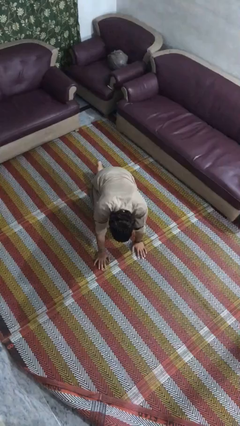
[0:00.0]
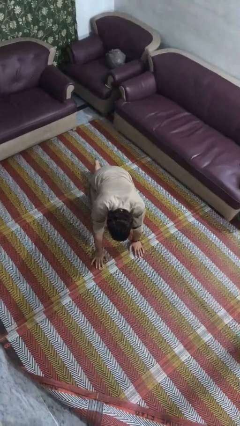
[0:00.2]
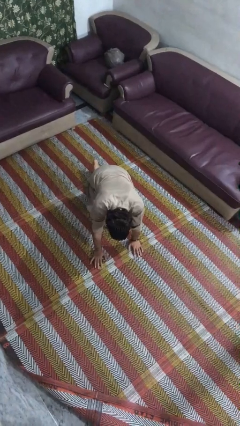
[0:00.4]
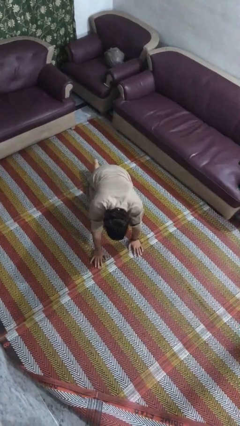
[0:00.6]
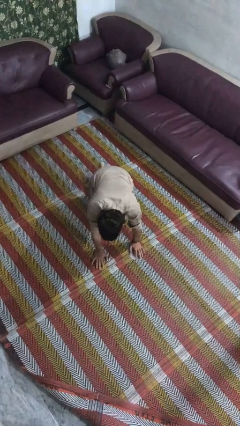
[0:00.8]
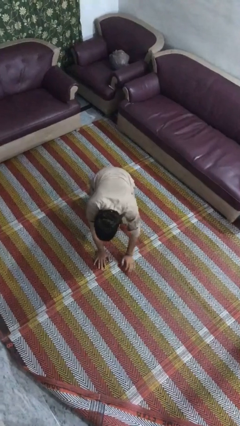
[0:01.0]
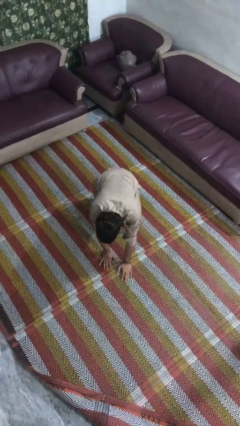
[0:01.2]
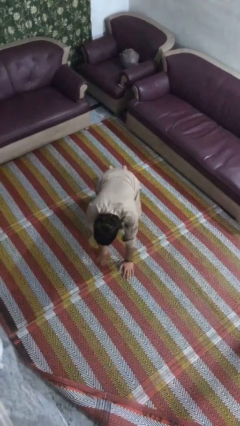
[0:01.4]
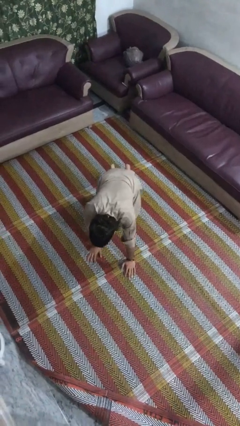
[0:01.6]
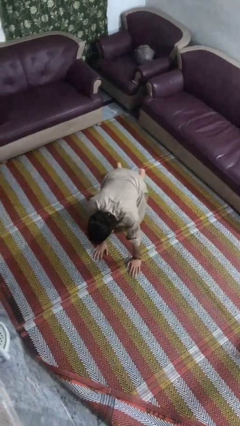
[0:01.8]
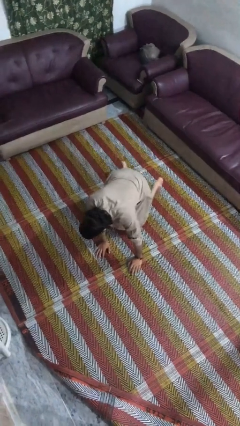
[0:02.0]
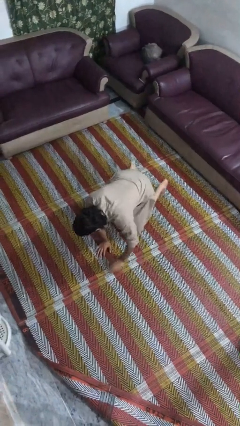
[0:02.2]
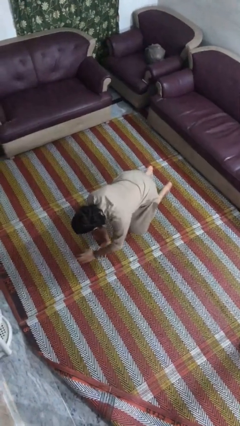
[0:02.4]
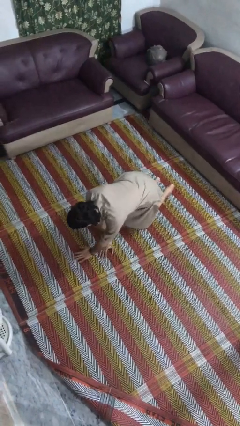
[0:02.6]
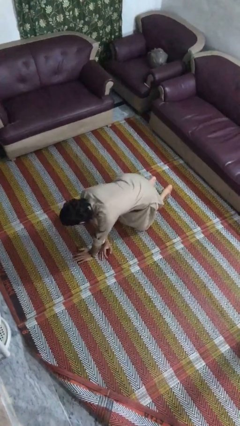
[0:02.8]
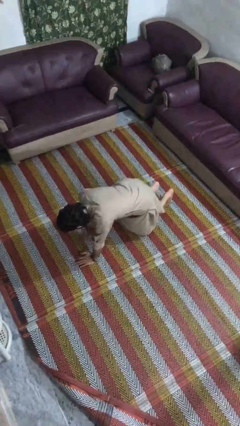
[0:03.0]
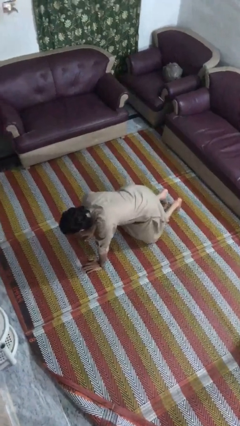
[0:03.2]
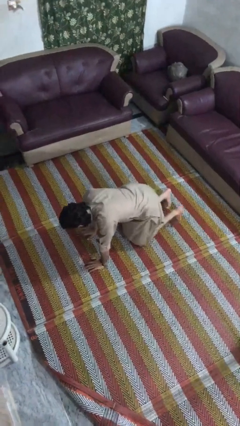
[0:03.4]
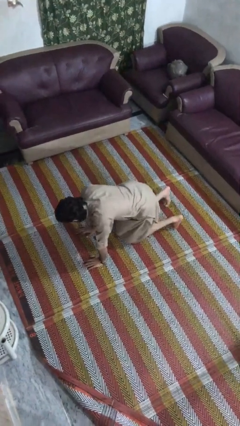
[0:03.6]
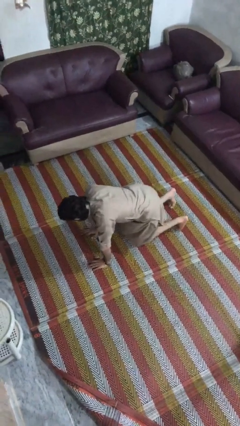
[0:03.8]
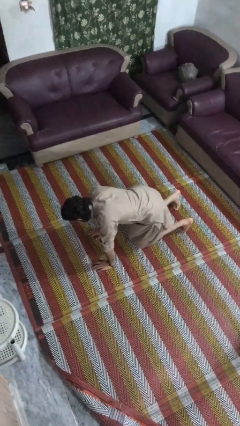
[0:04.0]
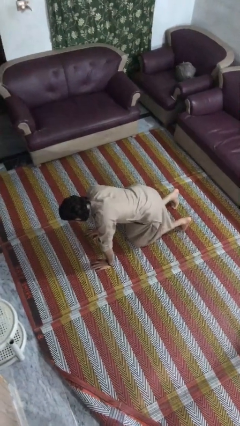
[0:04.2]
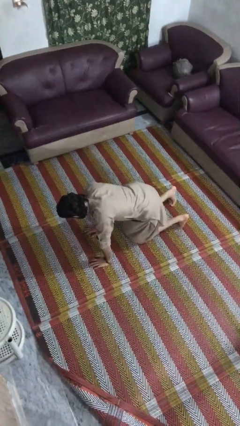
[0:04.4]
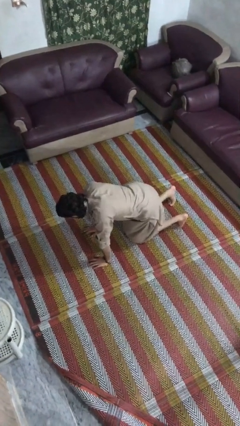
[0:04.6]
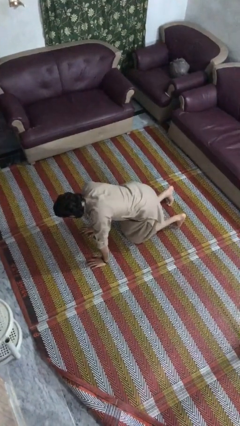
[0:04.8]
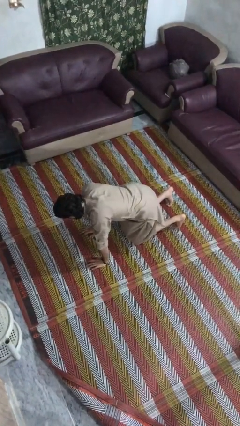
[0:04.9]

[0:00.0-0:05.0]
person crawls

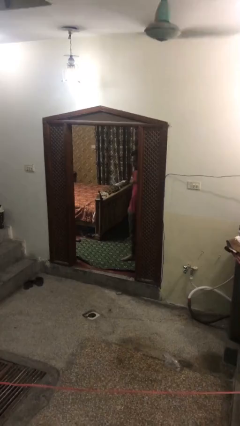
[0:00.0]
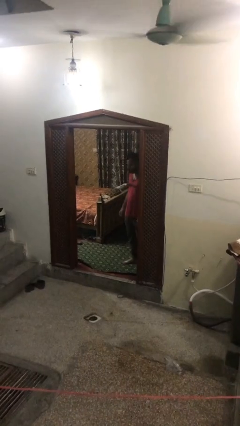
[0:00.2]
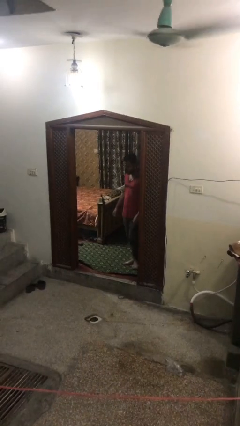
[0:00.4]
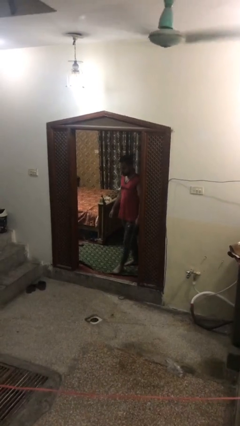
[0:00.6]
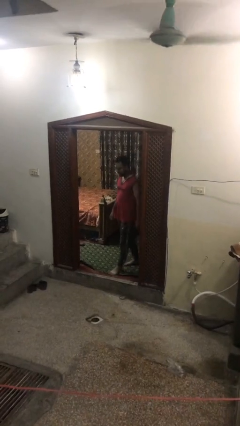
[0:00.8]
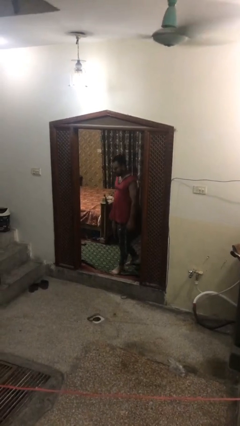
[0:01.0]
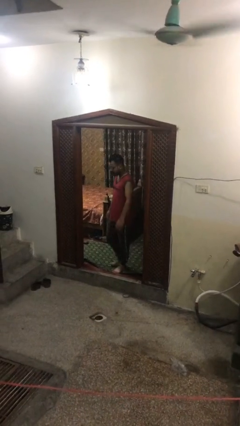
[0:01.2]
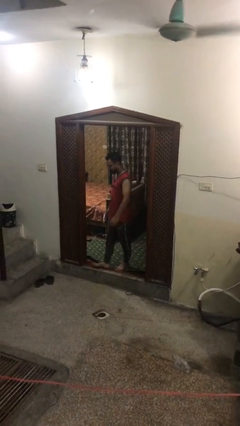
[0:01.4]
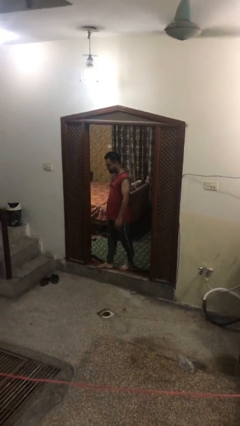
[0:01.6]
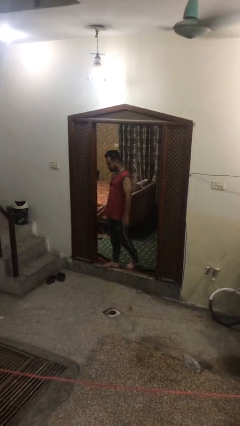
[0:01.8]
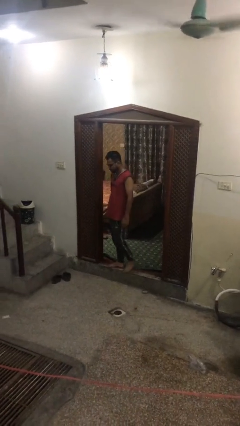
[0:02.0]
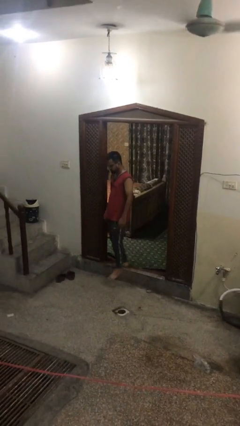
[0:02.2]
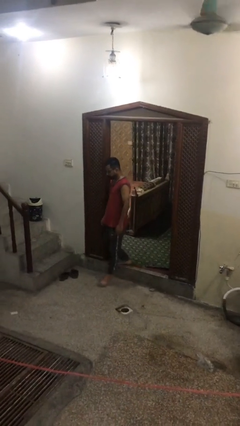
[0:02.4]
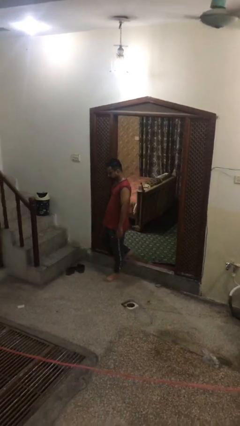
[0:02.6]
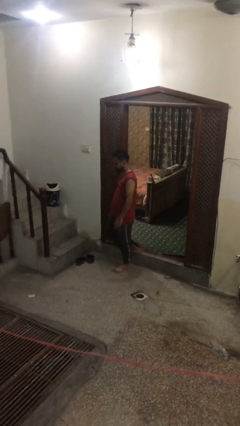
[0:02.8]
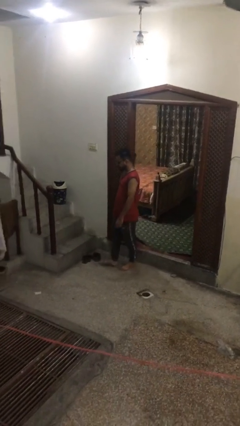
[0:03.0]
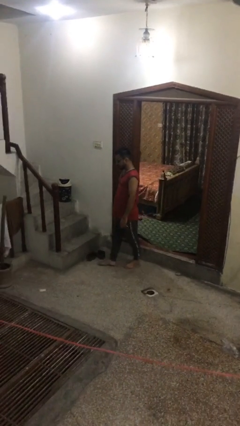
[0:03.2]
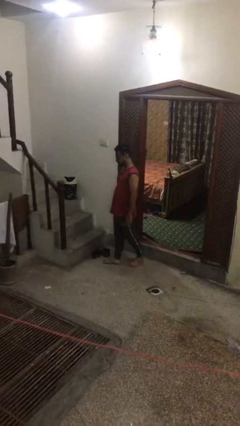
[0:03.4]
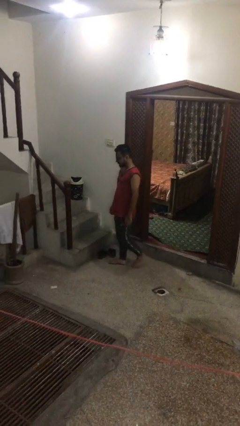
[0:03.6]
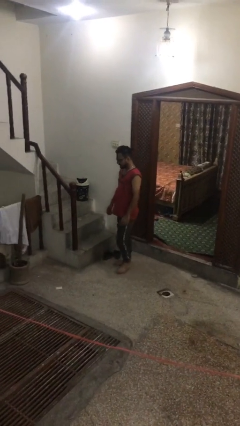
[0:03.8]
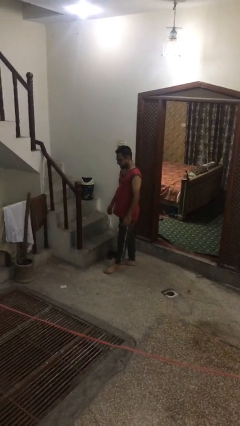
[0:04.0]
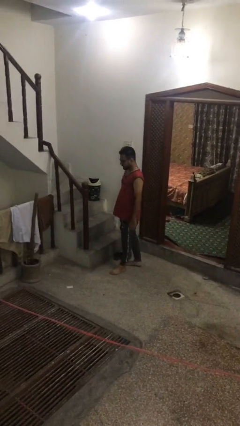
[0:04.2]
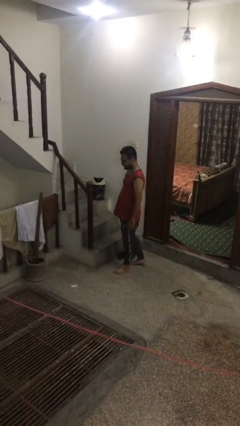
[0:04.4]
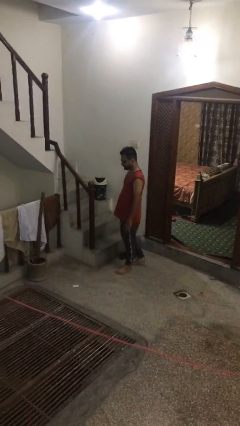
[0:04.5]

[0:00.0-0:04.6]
person enters scene through structure

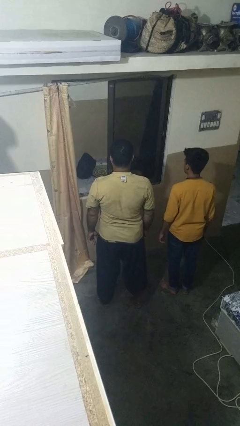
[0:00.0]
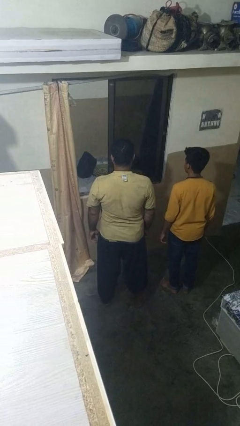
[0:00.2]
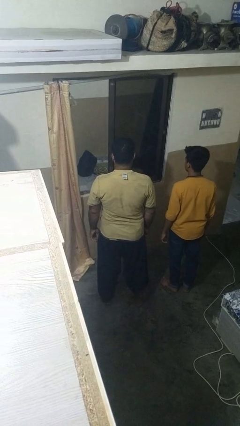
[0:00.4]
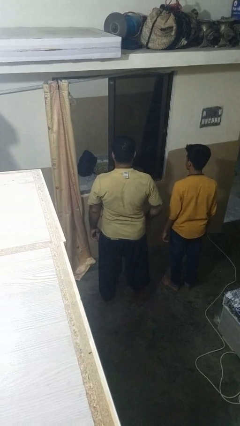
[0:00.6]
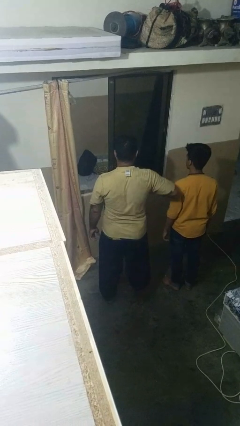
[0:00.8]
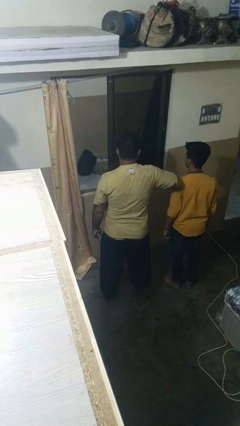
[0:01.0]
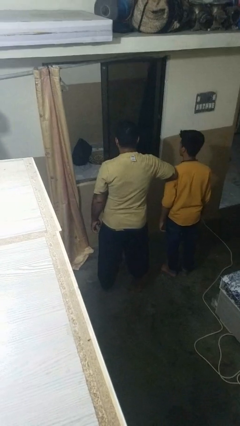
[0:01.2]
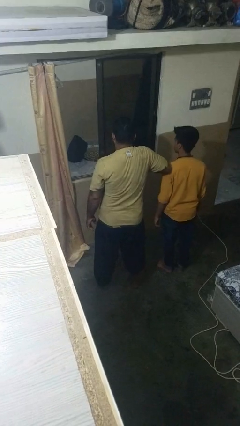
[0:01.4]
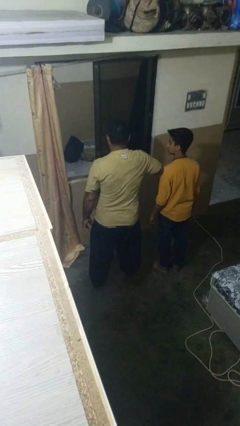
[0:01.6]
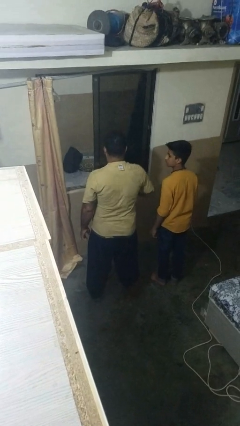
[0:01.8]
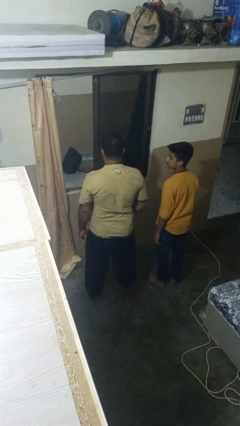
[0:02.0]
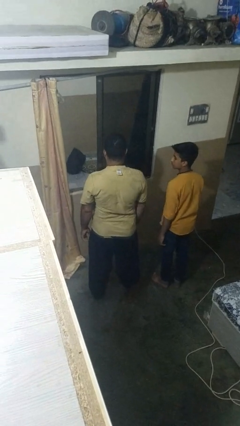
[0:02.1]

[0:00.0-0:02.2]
person nudges person with elbow

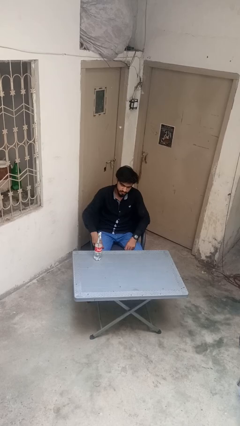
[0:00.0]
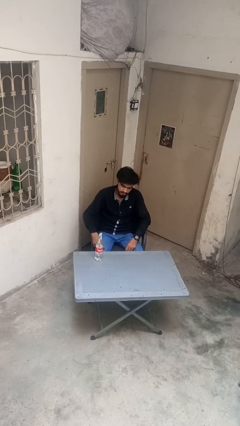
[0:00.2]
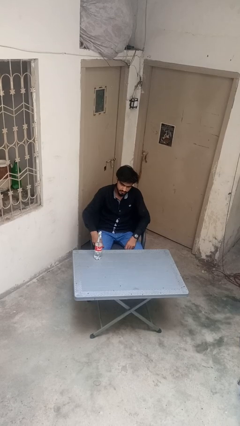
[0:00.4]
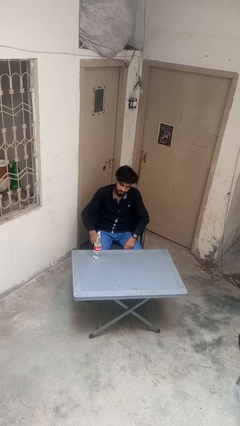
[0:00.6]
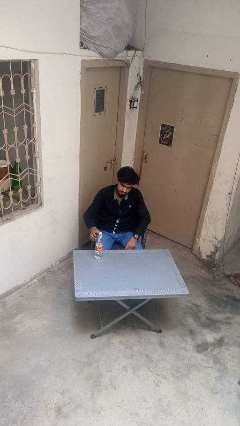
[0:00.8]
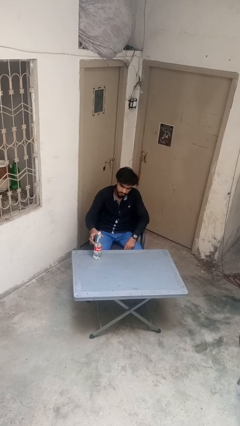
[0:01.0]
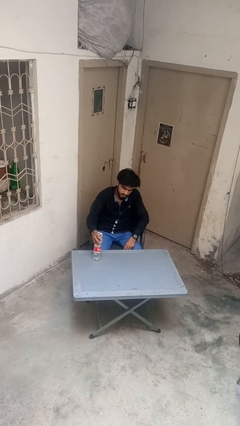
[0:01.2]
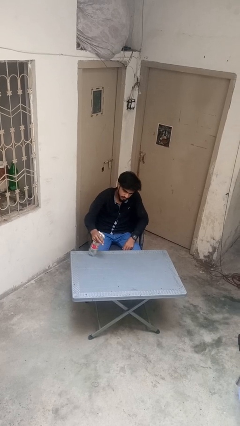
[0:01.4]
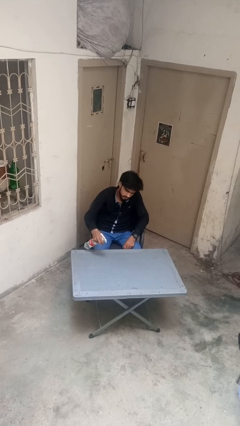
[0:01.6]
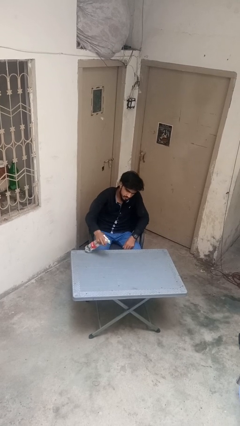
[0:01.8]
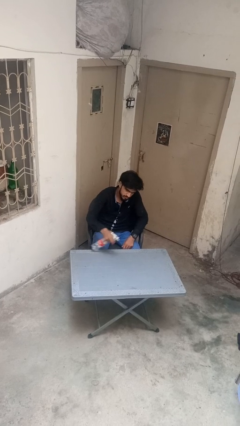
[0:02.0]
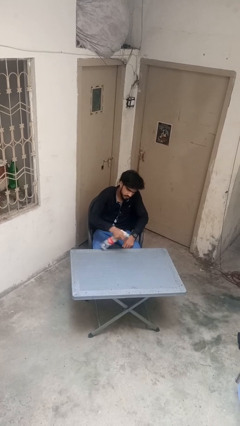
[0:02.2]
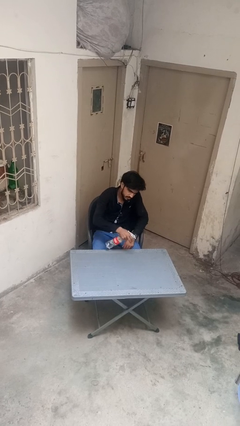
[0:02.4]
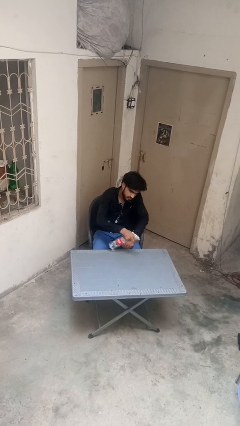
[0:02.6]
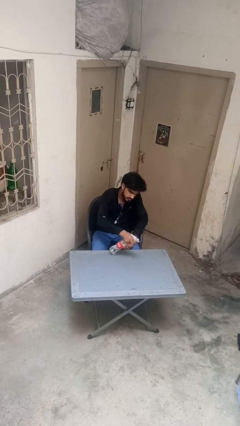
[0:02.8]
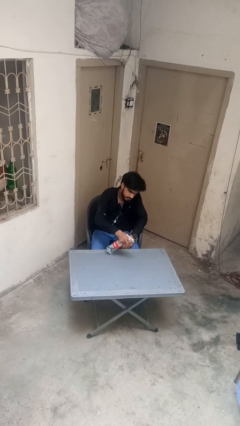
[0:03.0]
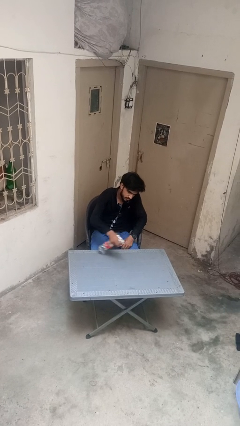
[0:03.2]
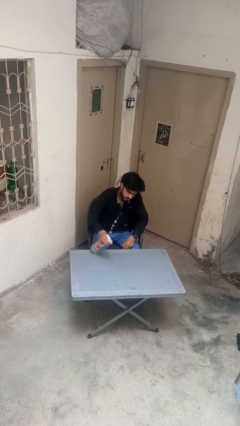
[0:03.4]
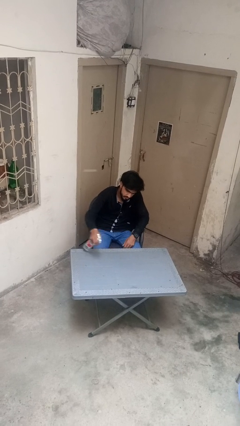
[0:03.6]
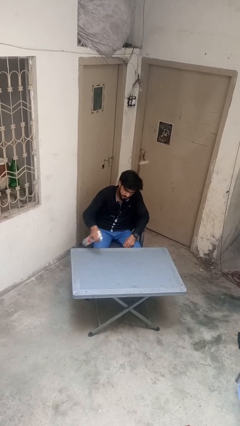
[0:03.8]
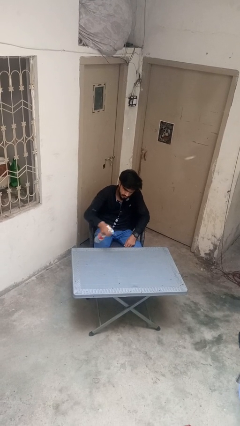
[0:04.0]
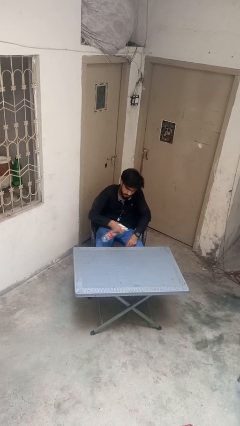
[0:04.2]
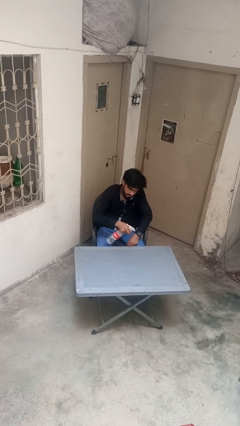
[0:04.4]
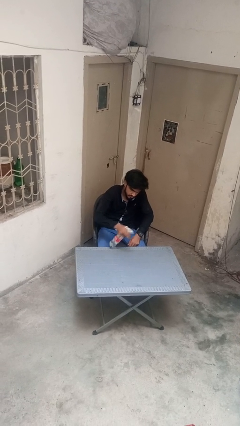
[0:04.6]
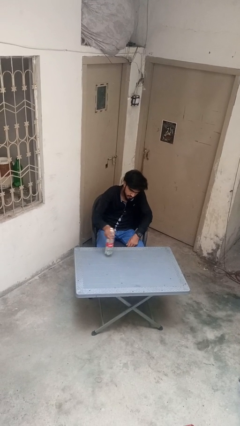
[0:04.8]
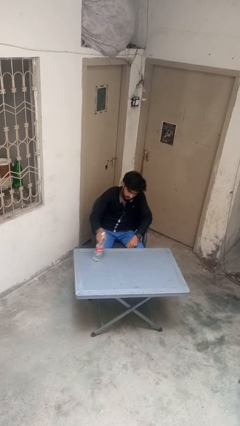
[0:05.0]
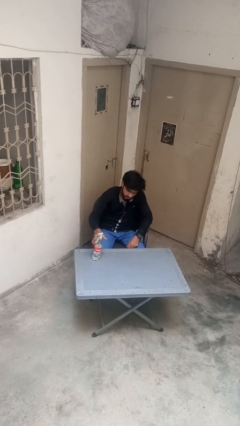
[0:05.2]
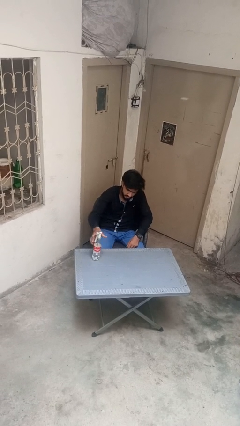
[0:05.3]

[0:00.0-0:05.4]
person sprays from bottle

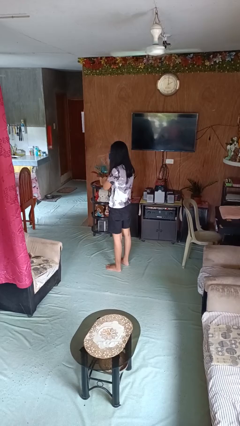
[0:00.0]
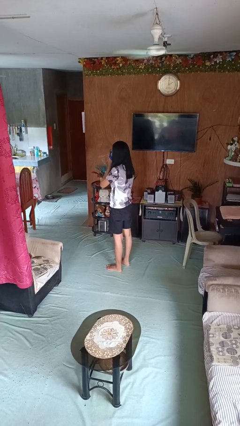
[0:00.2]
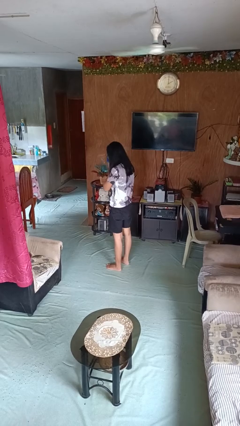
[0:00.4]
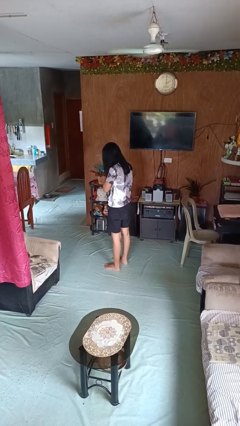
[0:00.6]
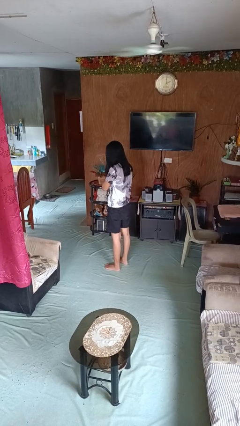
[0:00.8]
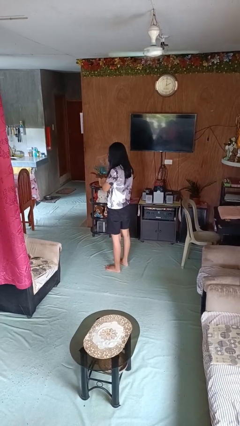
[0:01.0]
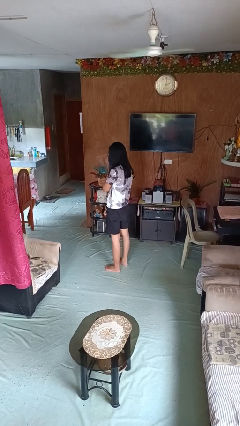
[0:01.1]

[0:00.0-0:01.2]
person blows nose
